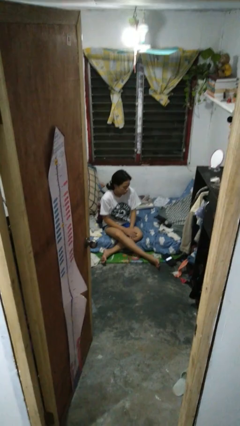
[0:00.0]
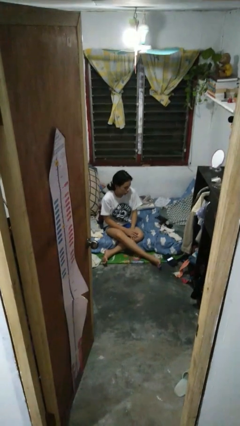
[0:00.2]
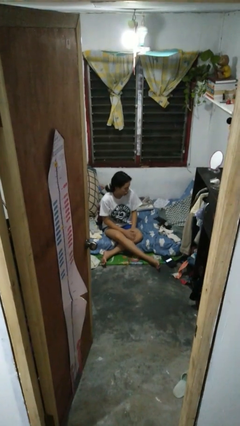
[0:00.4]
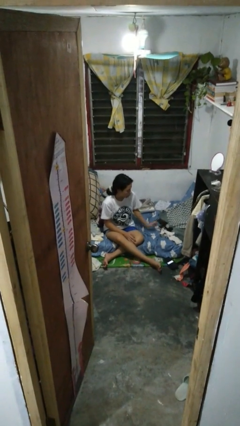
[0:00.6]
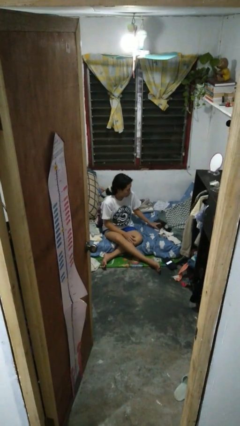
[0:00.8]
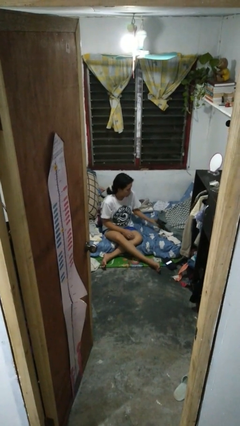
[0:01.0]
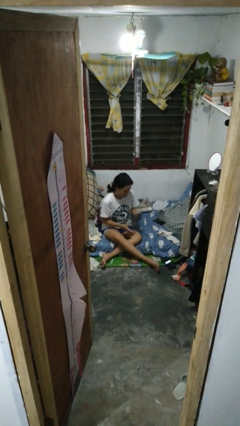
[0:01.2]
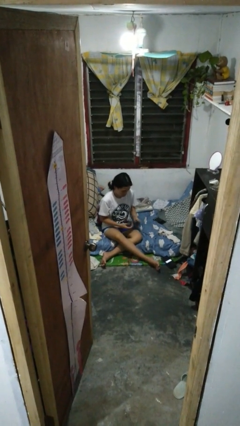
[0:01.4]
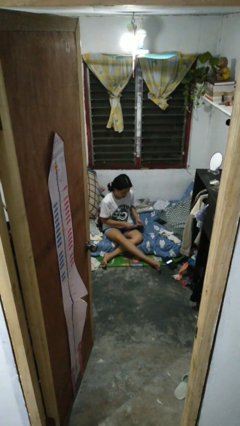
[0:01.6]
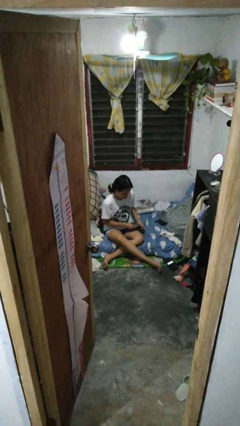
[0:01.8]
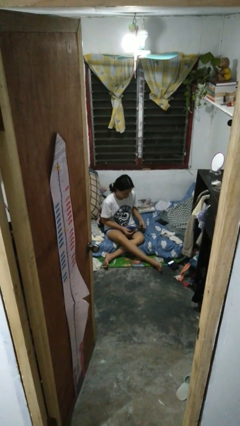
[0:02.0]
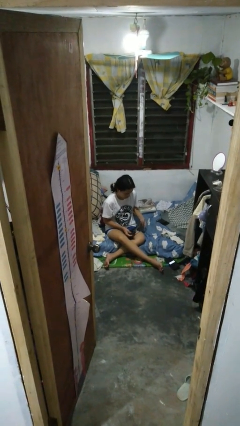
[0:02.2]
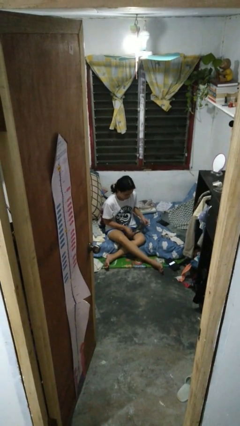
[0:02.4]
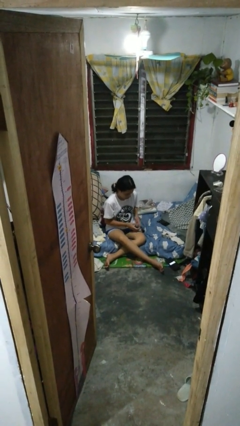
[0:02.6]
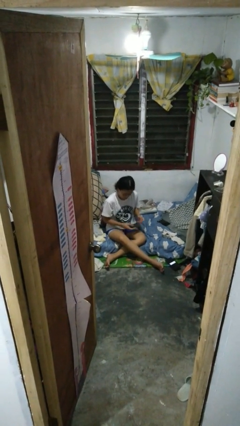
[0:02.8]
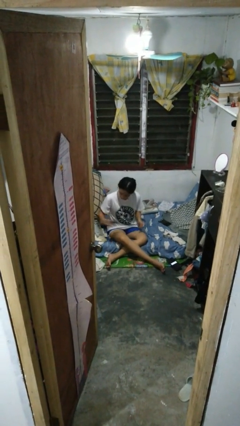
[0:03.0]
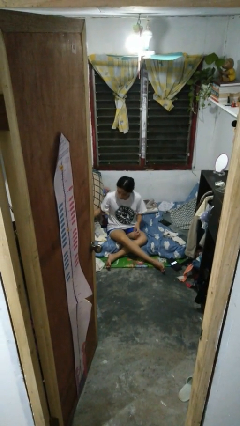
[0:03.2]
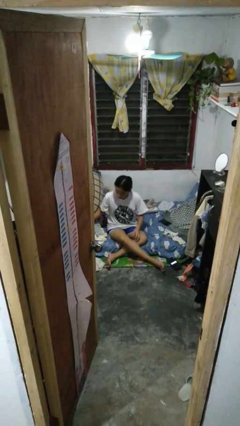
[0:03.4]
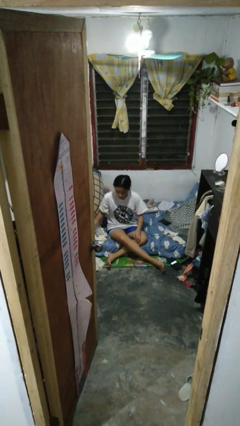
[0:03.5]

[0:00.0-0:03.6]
person folds socks

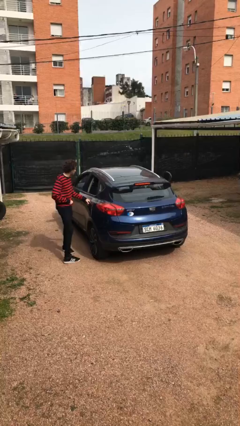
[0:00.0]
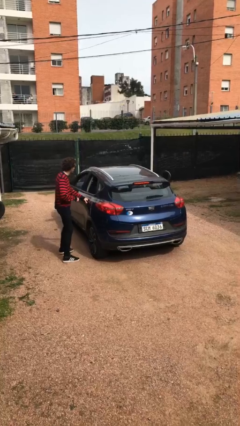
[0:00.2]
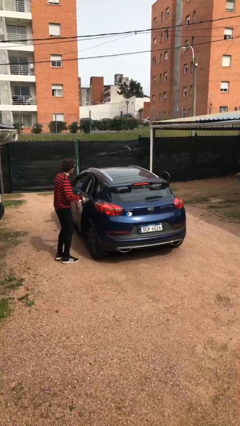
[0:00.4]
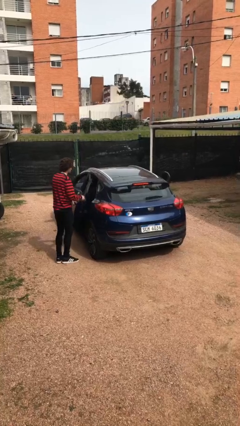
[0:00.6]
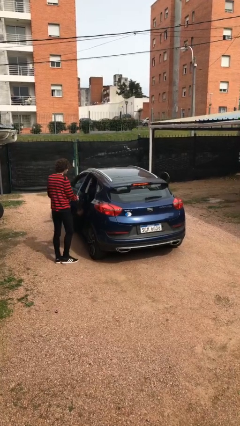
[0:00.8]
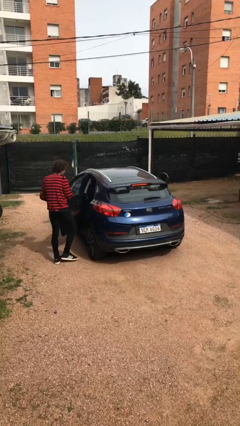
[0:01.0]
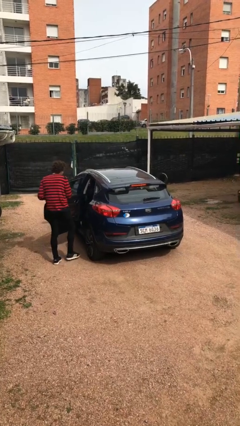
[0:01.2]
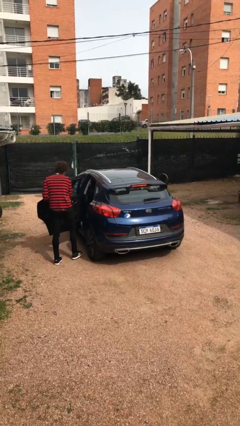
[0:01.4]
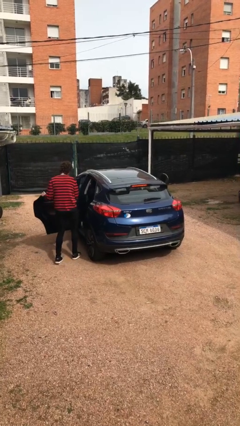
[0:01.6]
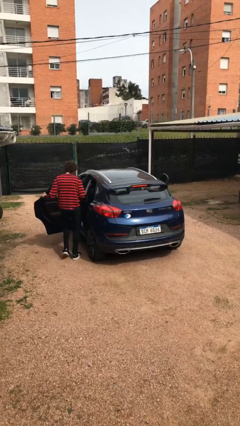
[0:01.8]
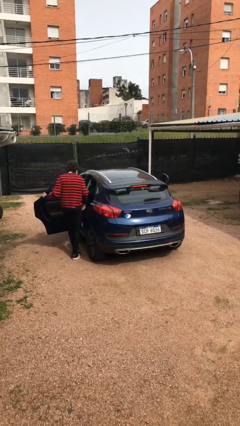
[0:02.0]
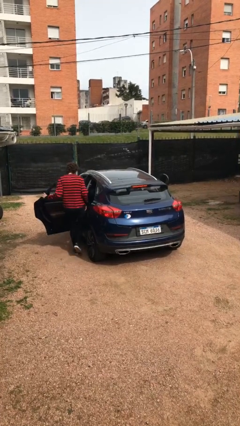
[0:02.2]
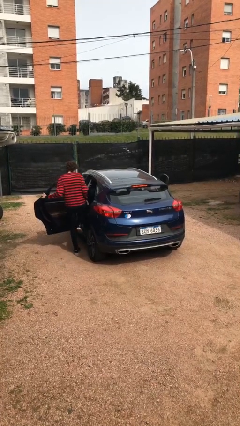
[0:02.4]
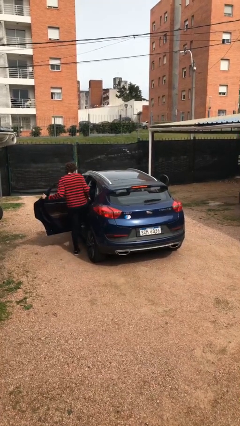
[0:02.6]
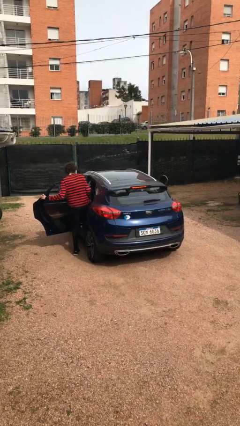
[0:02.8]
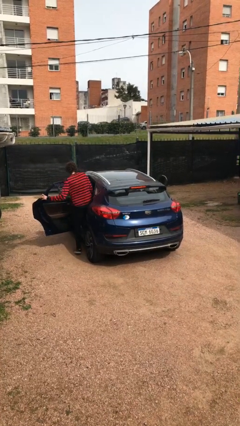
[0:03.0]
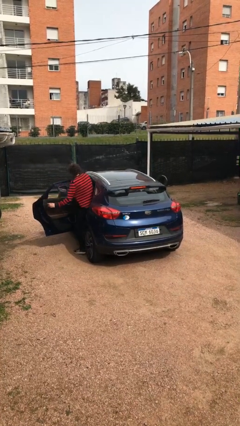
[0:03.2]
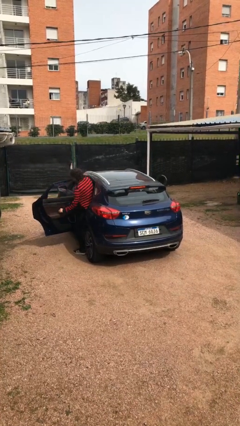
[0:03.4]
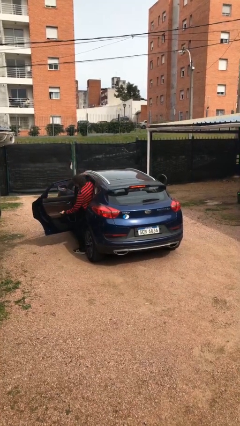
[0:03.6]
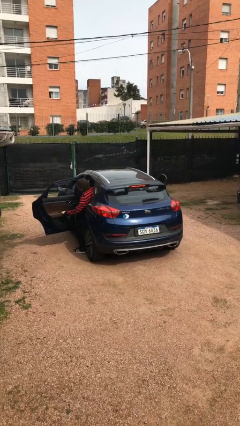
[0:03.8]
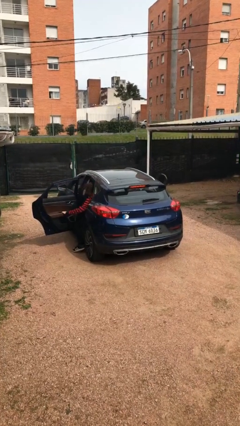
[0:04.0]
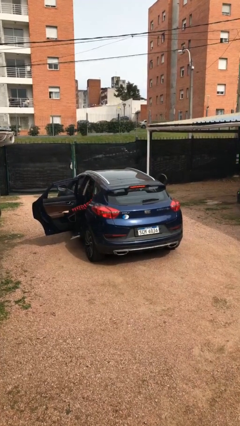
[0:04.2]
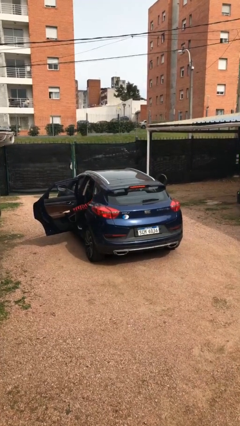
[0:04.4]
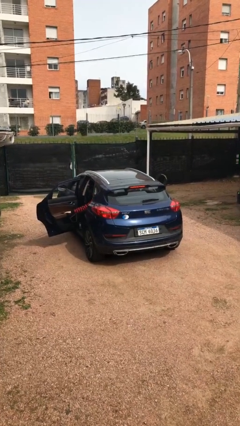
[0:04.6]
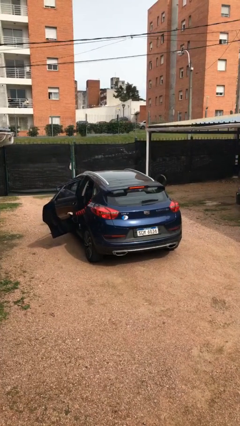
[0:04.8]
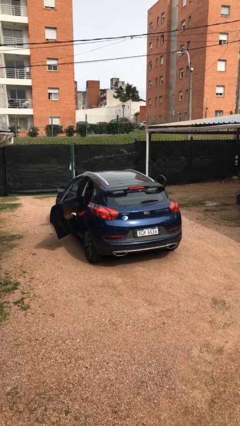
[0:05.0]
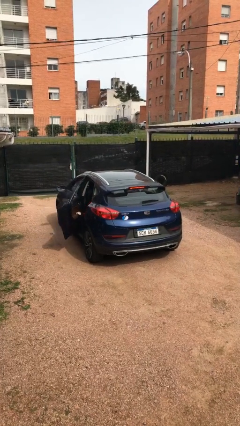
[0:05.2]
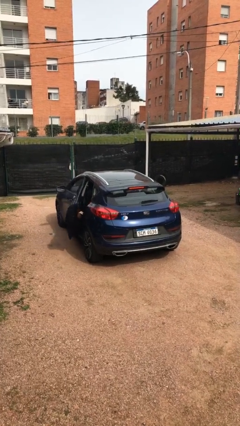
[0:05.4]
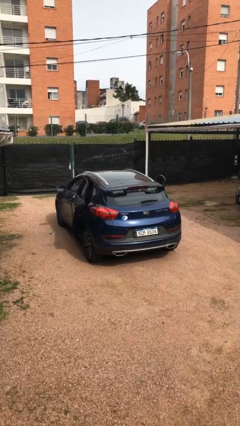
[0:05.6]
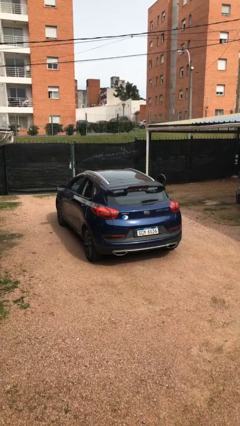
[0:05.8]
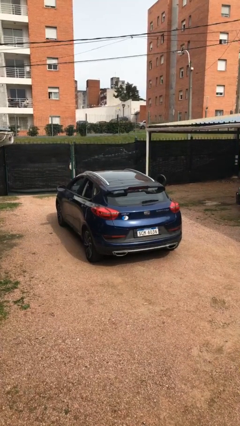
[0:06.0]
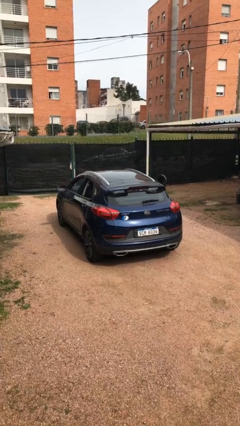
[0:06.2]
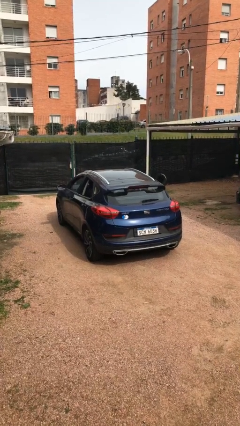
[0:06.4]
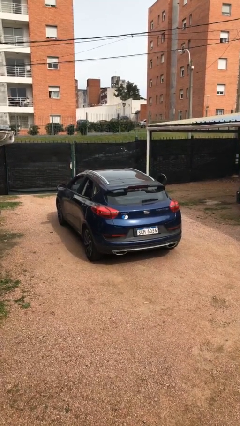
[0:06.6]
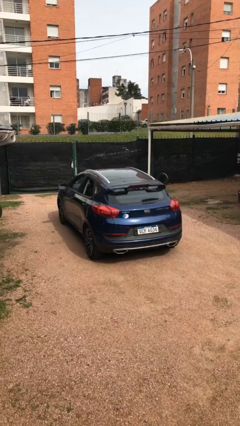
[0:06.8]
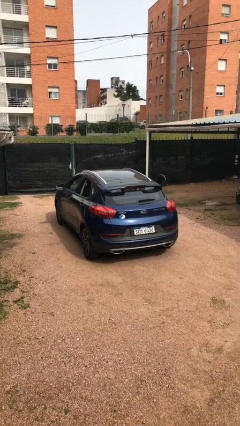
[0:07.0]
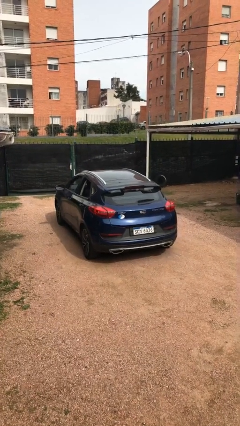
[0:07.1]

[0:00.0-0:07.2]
car picks up person

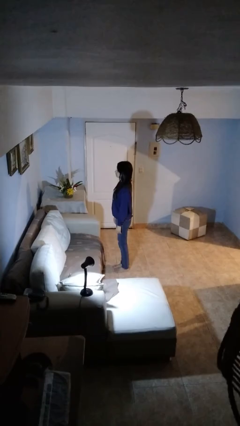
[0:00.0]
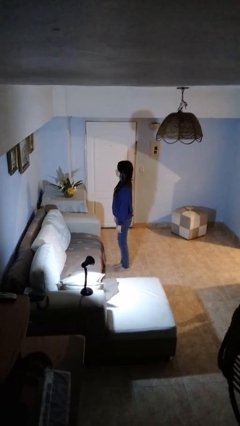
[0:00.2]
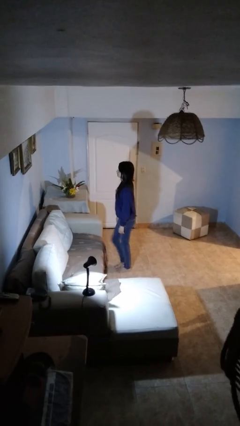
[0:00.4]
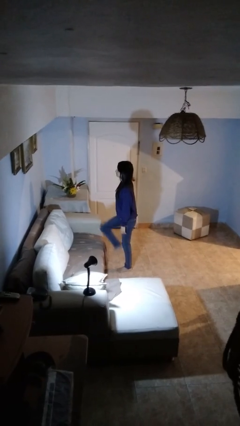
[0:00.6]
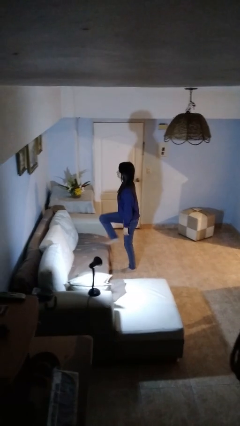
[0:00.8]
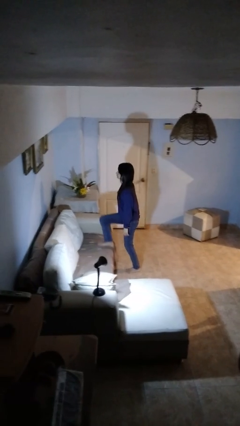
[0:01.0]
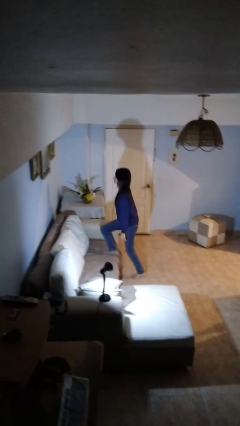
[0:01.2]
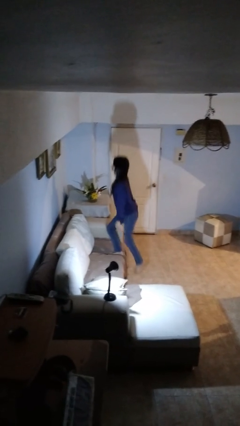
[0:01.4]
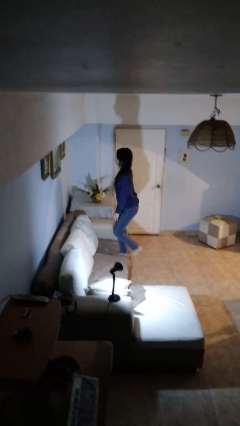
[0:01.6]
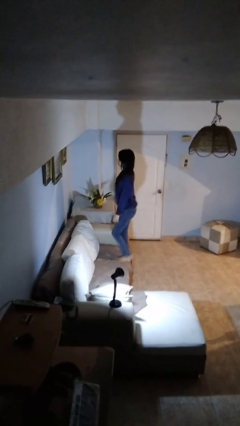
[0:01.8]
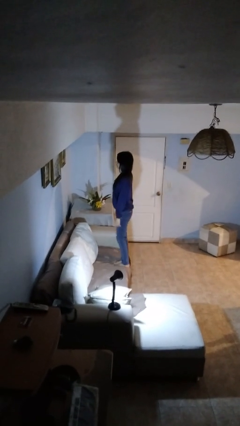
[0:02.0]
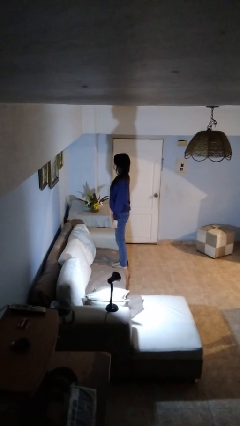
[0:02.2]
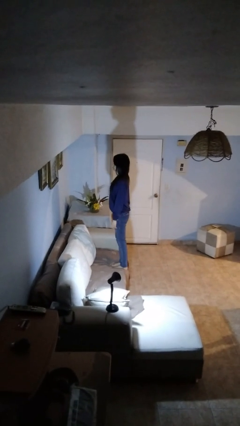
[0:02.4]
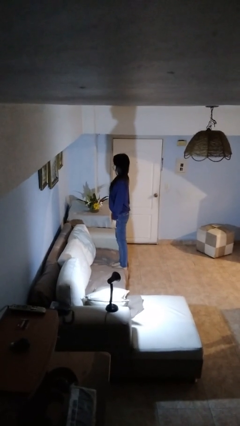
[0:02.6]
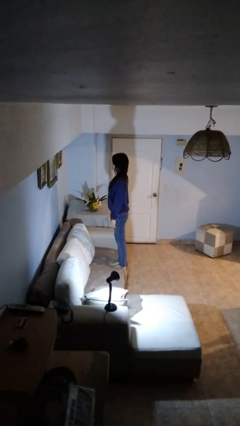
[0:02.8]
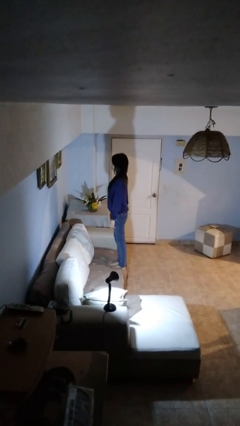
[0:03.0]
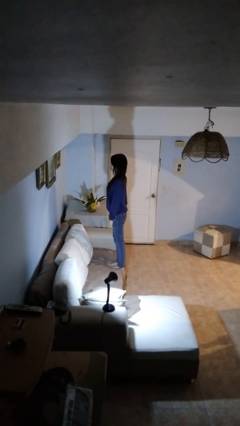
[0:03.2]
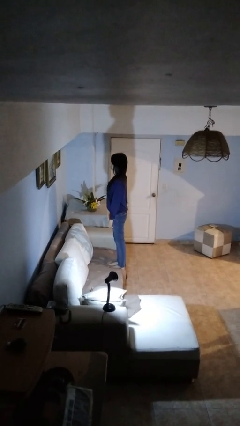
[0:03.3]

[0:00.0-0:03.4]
person climbs on couch

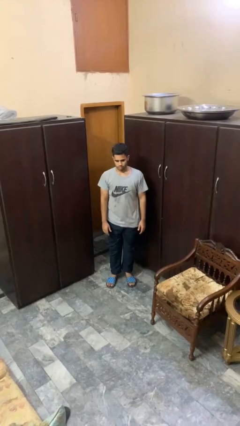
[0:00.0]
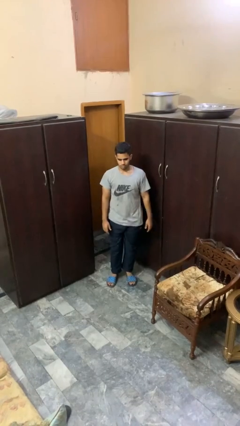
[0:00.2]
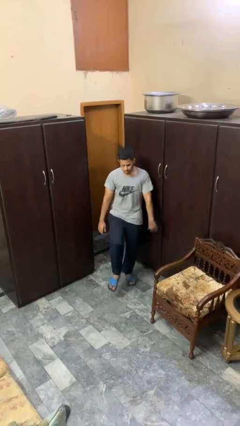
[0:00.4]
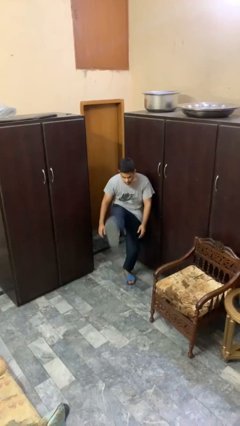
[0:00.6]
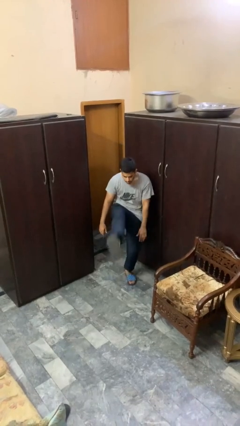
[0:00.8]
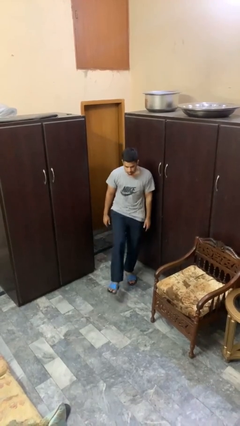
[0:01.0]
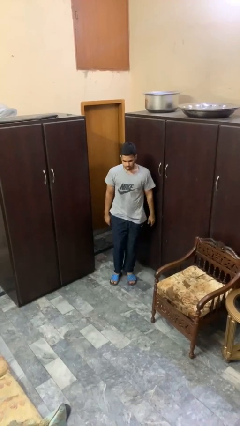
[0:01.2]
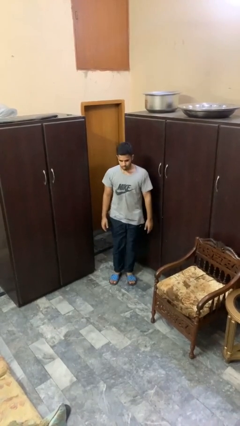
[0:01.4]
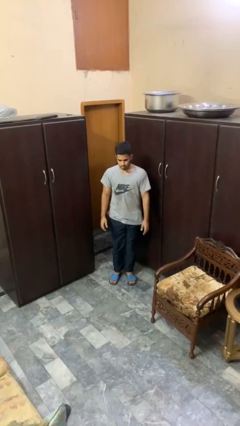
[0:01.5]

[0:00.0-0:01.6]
person karate kicks

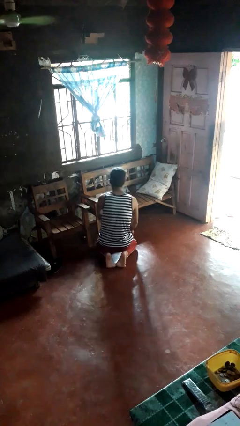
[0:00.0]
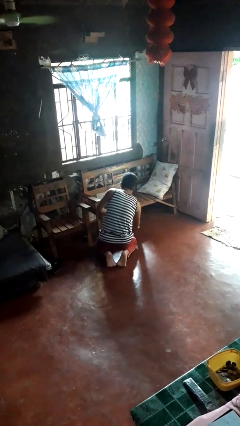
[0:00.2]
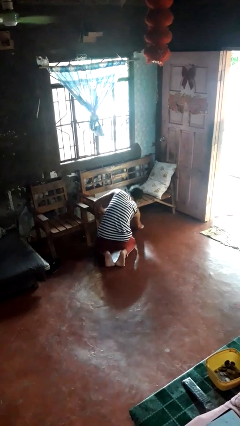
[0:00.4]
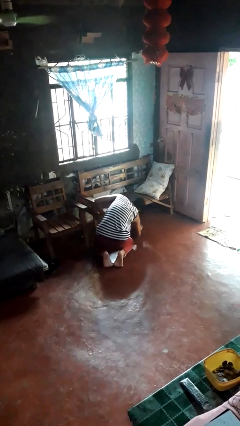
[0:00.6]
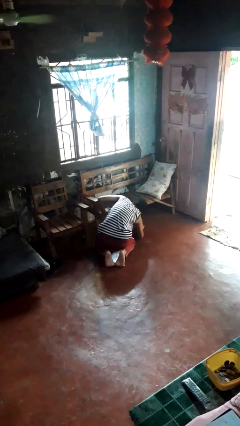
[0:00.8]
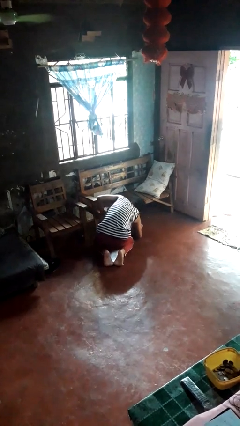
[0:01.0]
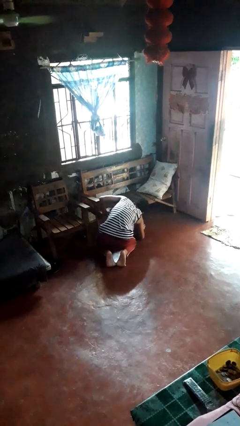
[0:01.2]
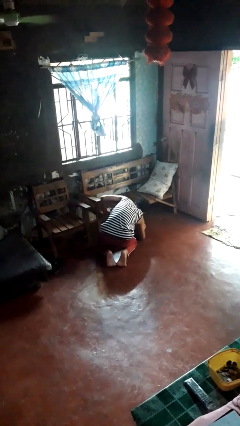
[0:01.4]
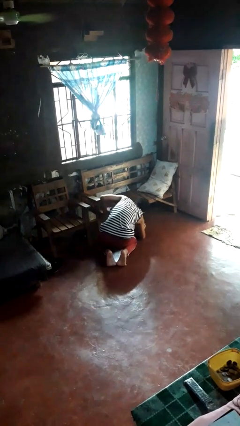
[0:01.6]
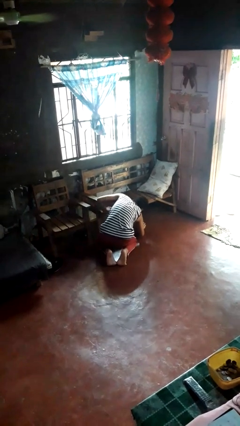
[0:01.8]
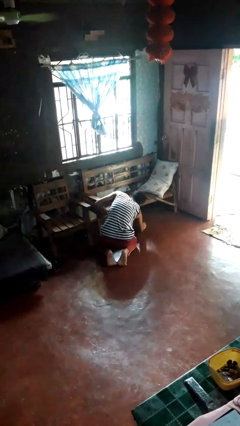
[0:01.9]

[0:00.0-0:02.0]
person searches in couch
